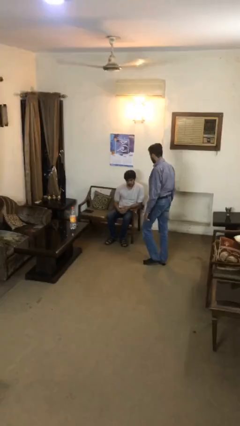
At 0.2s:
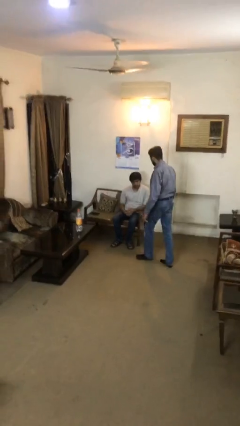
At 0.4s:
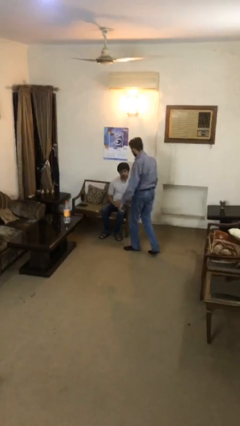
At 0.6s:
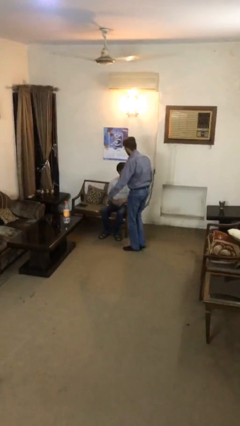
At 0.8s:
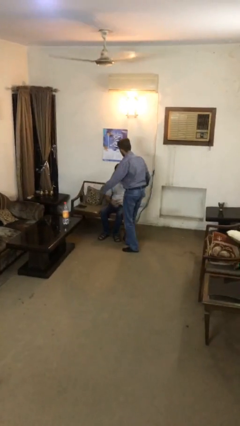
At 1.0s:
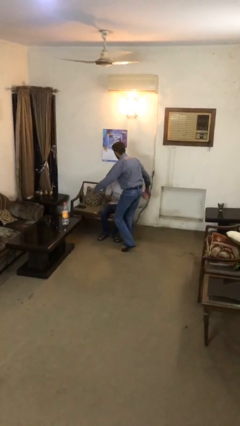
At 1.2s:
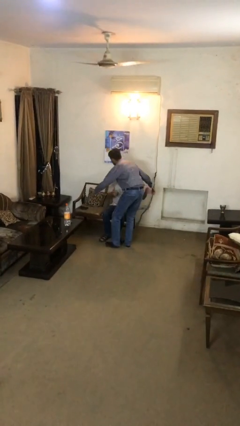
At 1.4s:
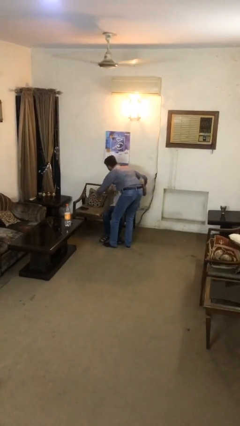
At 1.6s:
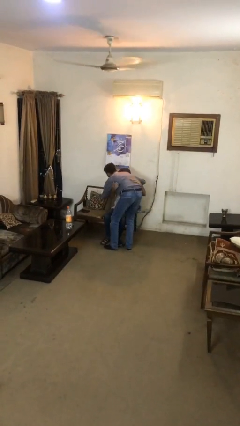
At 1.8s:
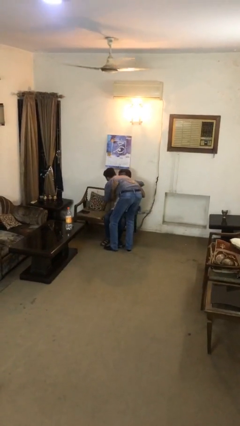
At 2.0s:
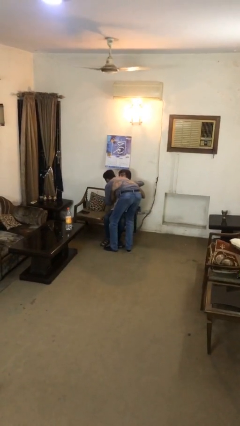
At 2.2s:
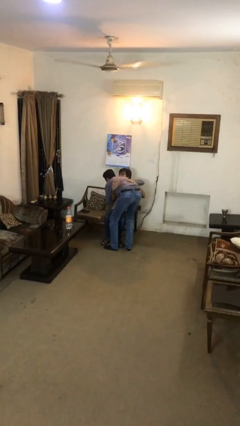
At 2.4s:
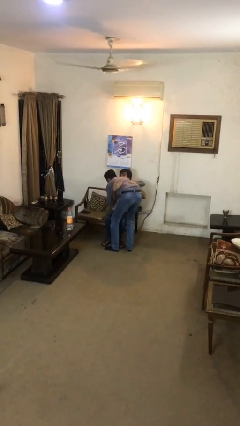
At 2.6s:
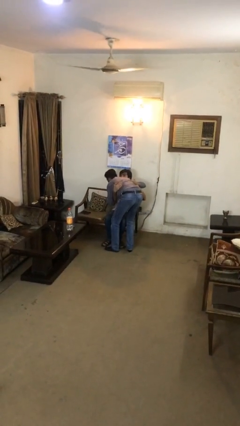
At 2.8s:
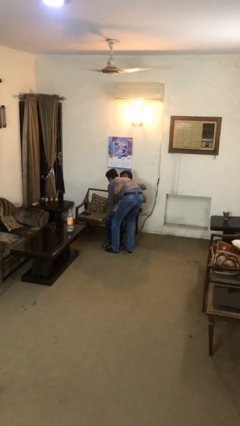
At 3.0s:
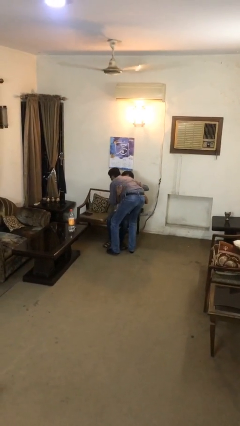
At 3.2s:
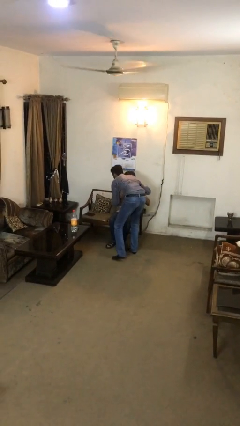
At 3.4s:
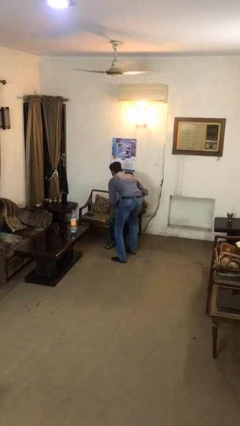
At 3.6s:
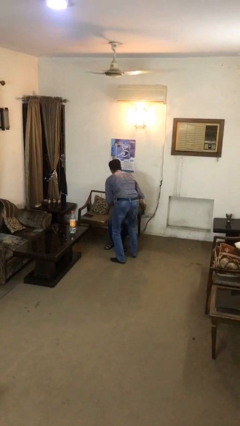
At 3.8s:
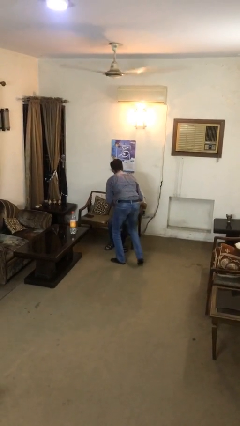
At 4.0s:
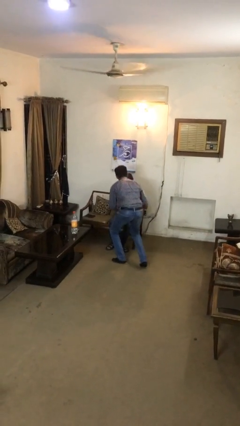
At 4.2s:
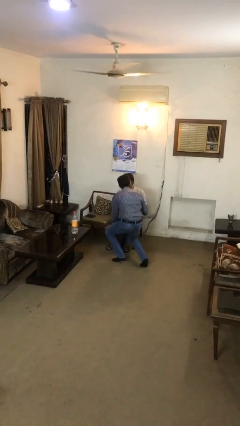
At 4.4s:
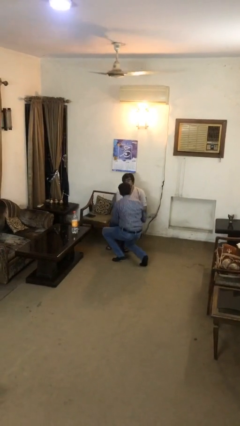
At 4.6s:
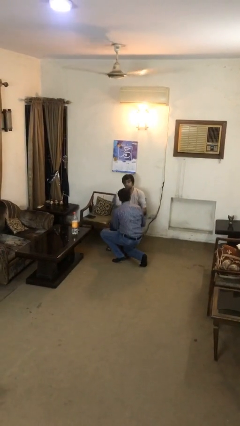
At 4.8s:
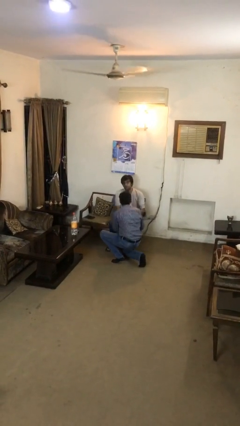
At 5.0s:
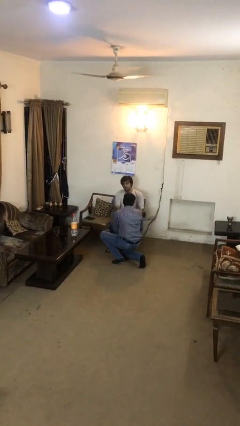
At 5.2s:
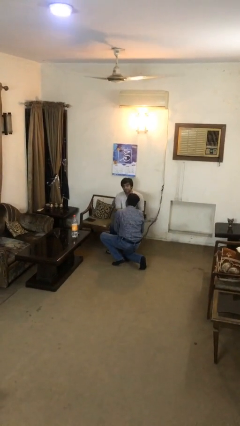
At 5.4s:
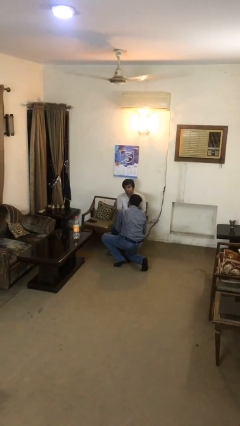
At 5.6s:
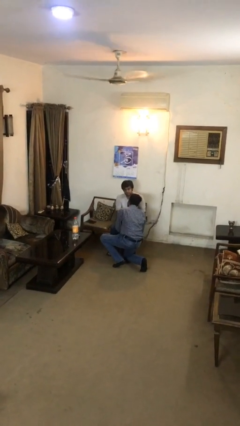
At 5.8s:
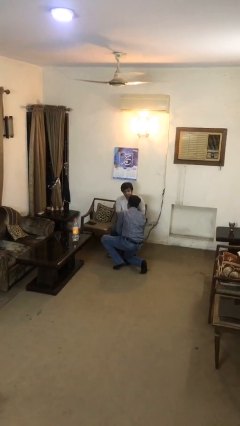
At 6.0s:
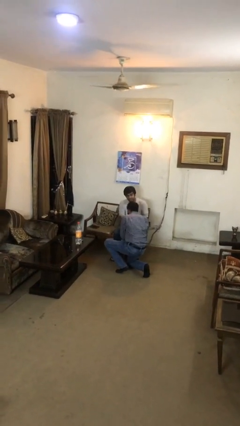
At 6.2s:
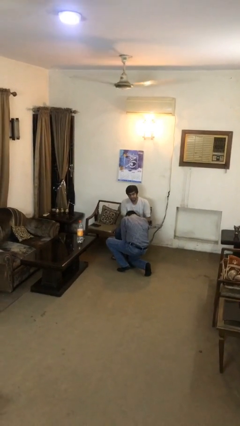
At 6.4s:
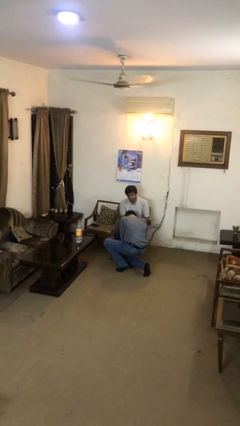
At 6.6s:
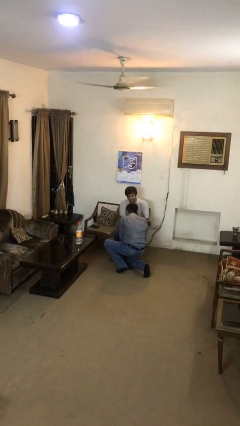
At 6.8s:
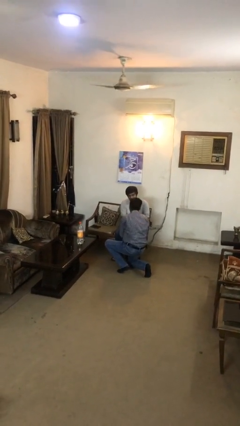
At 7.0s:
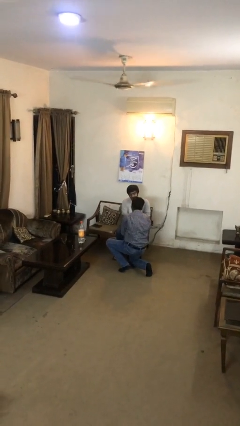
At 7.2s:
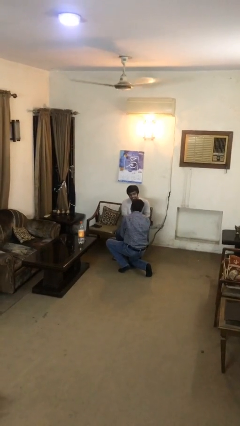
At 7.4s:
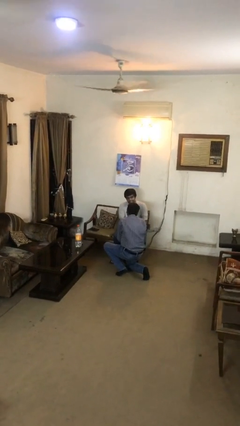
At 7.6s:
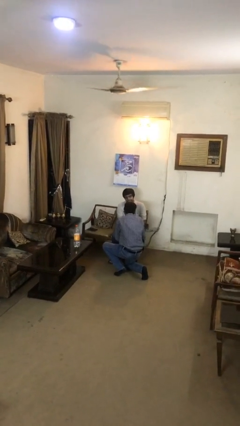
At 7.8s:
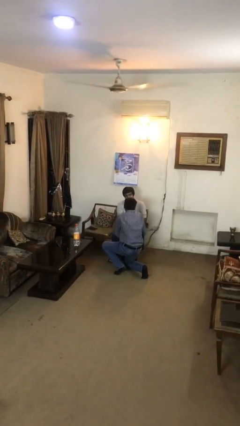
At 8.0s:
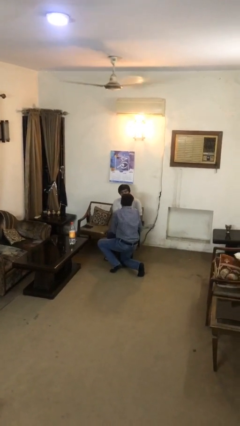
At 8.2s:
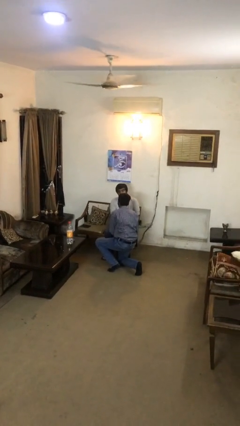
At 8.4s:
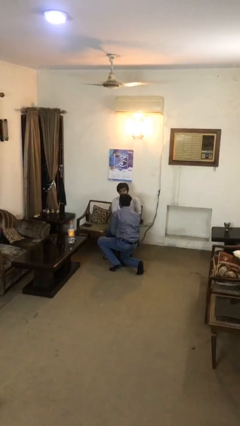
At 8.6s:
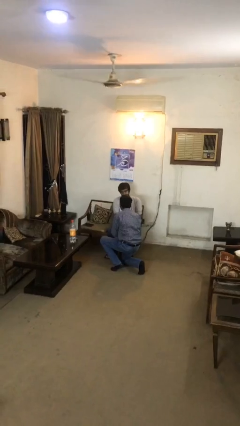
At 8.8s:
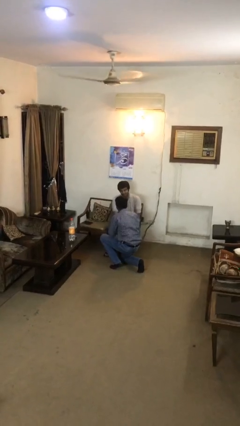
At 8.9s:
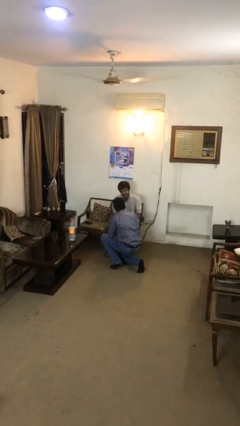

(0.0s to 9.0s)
person embraces person

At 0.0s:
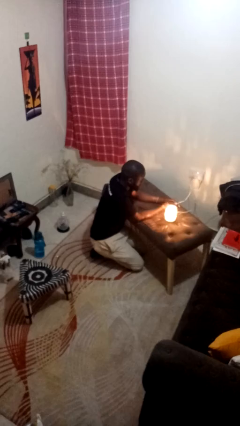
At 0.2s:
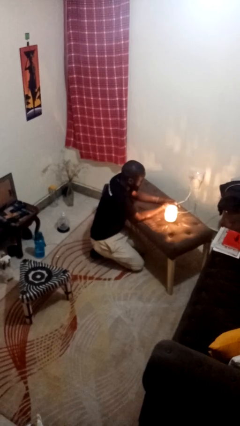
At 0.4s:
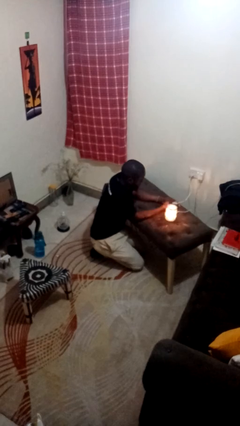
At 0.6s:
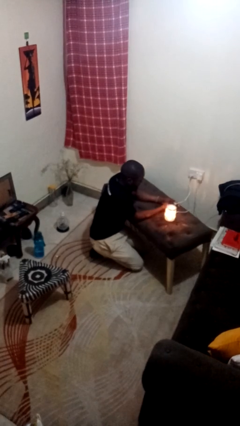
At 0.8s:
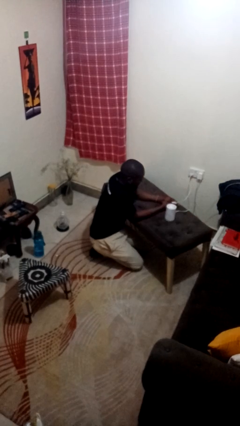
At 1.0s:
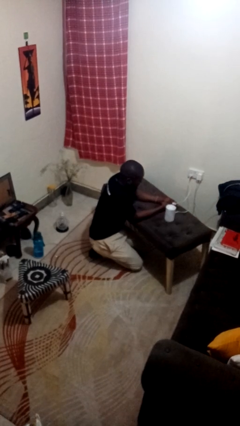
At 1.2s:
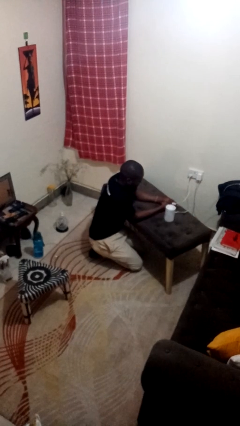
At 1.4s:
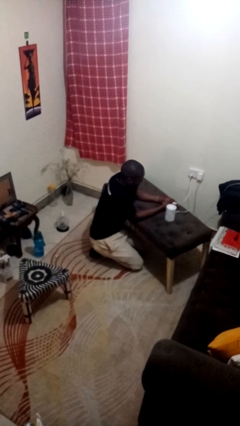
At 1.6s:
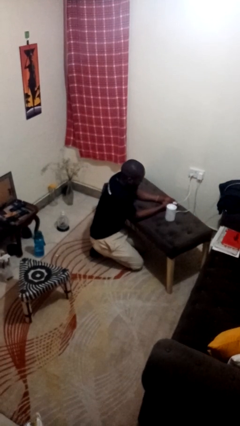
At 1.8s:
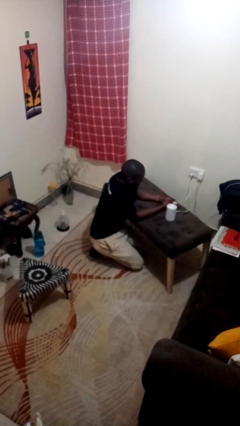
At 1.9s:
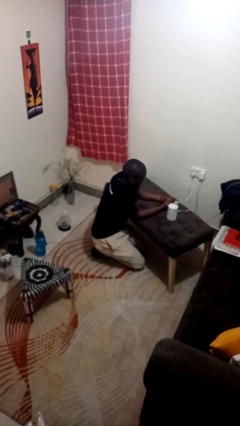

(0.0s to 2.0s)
person turns off lamp

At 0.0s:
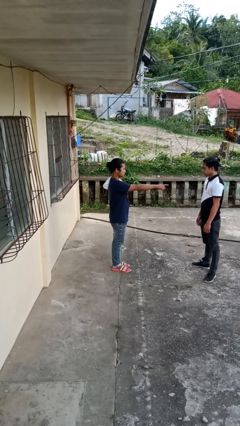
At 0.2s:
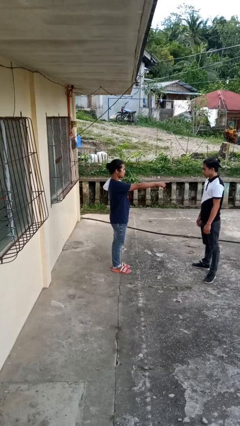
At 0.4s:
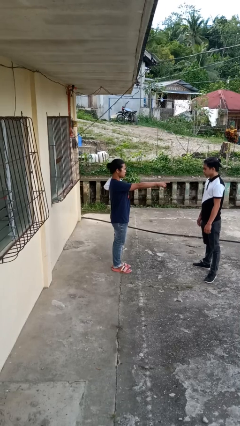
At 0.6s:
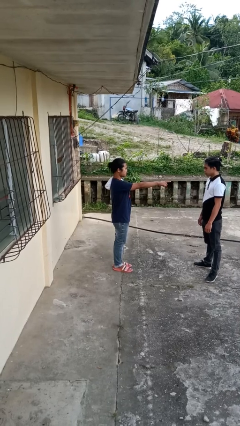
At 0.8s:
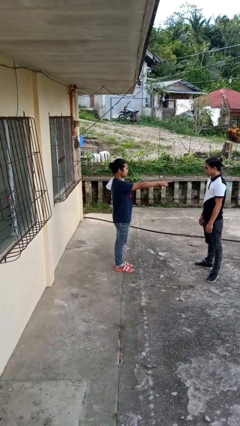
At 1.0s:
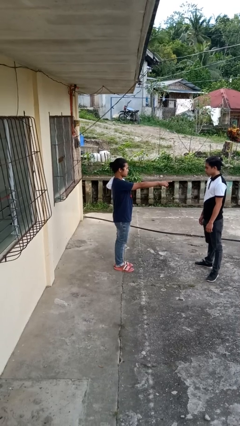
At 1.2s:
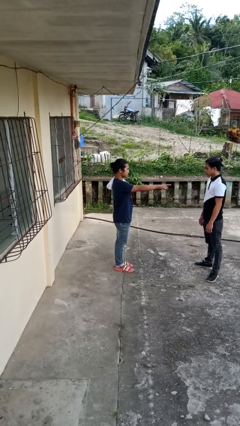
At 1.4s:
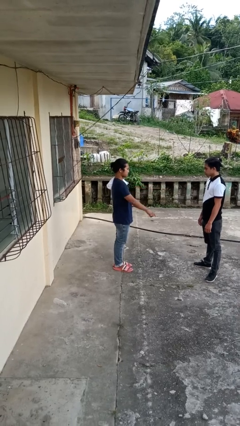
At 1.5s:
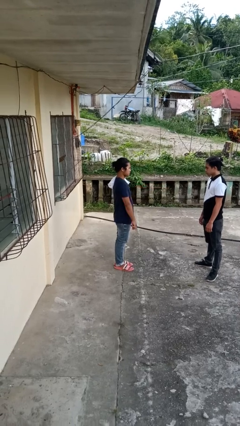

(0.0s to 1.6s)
person points at person

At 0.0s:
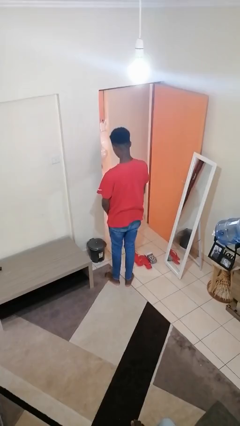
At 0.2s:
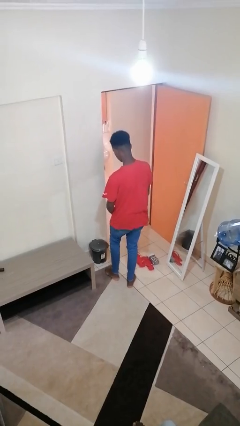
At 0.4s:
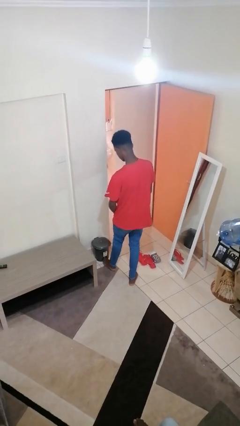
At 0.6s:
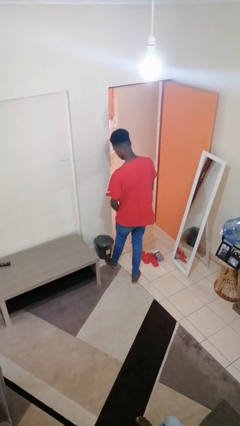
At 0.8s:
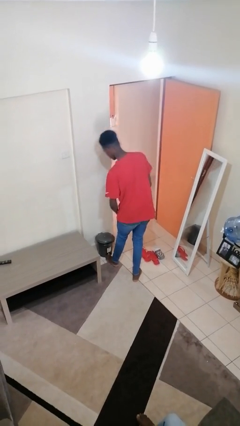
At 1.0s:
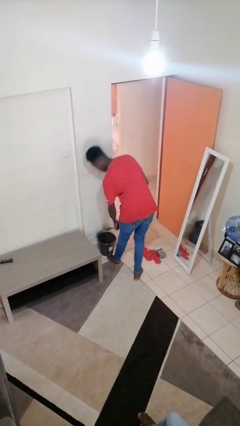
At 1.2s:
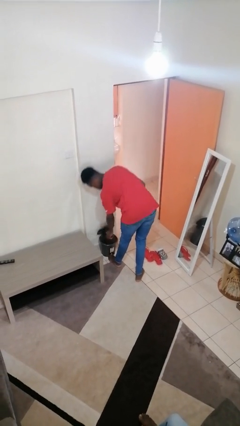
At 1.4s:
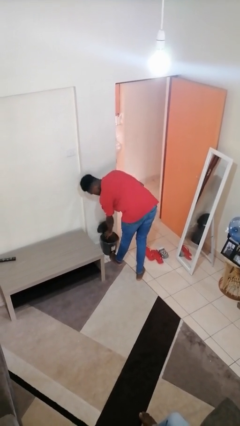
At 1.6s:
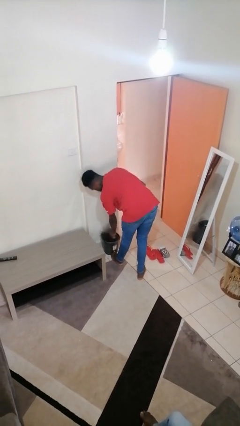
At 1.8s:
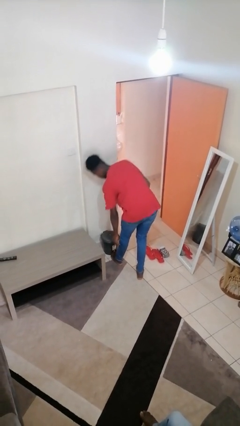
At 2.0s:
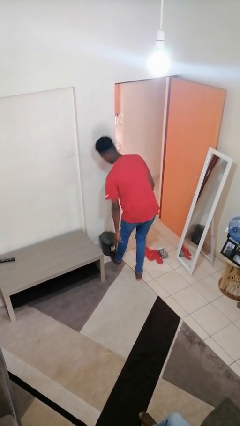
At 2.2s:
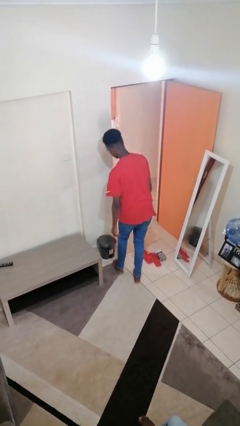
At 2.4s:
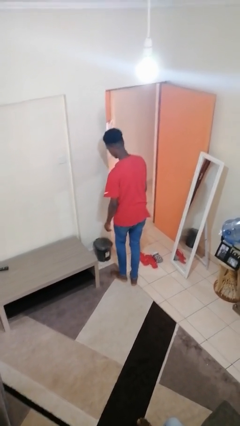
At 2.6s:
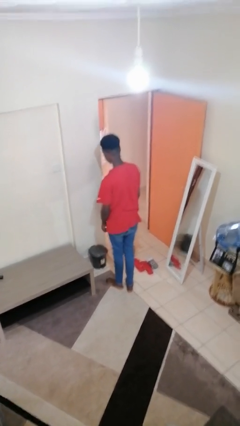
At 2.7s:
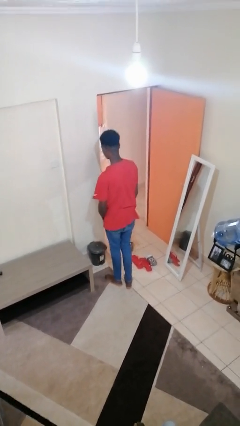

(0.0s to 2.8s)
person discards trash

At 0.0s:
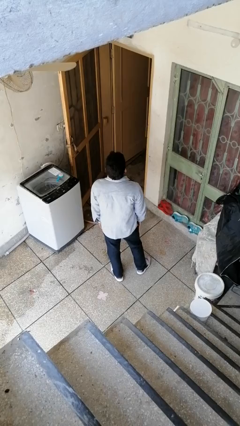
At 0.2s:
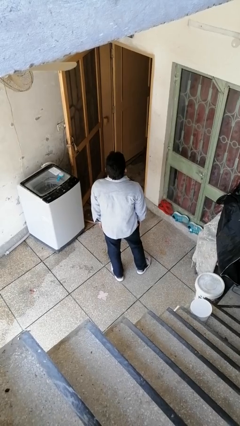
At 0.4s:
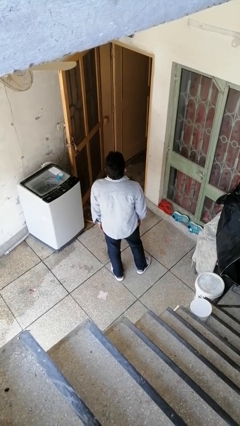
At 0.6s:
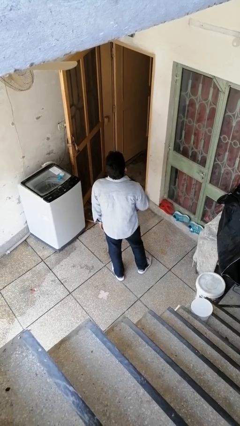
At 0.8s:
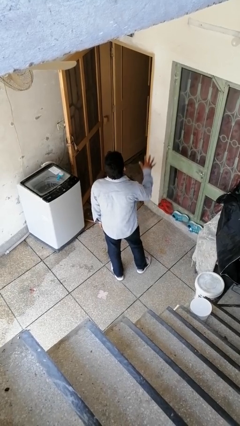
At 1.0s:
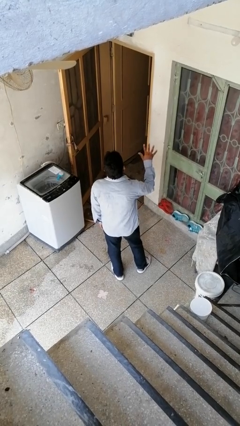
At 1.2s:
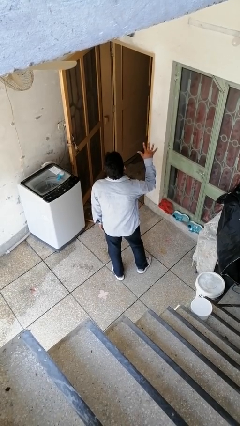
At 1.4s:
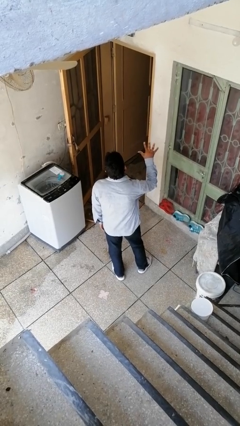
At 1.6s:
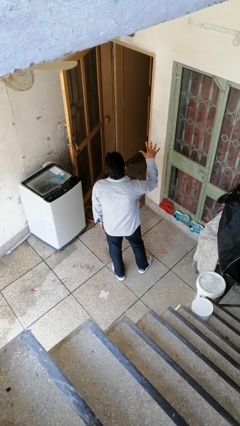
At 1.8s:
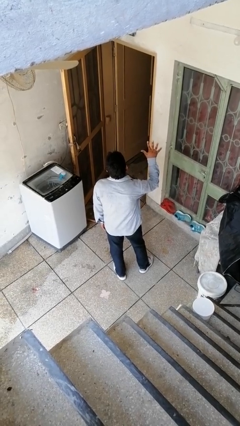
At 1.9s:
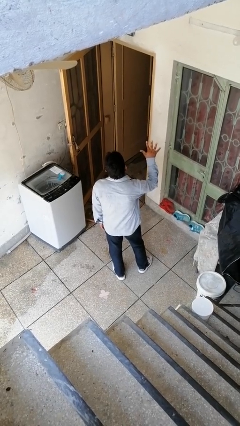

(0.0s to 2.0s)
person gestures number five
